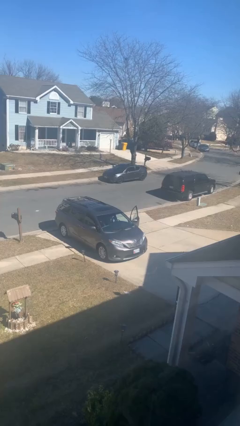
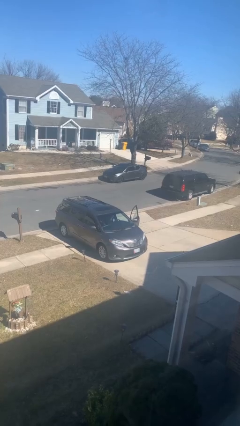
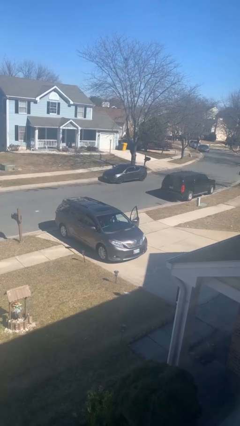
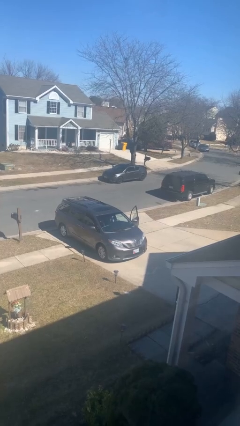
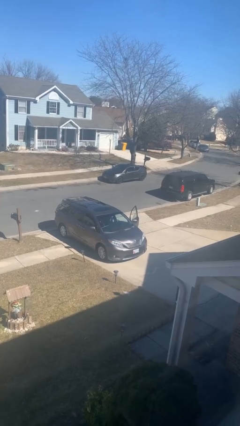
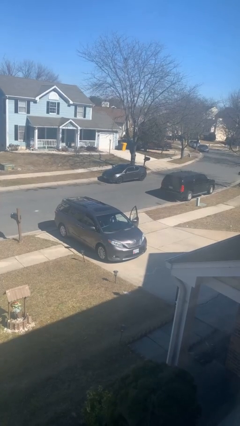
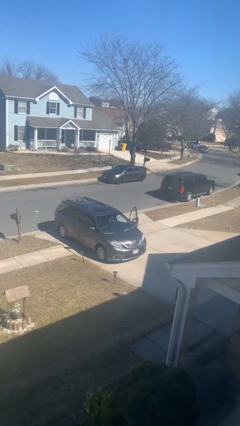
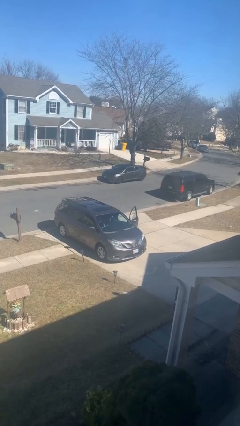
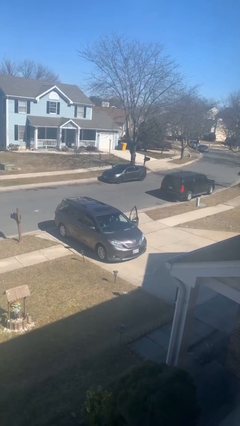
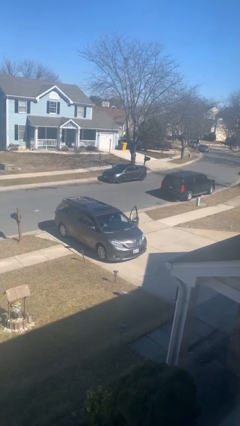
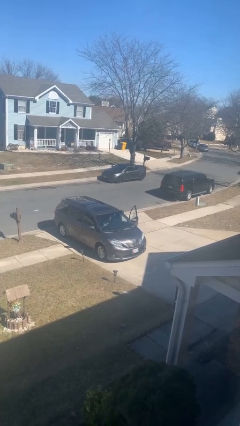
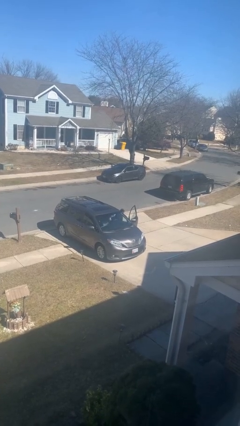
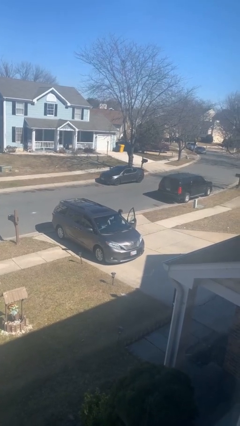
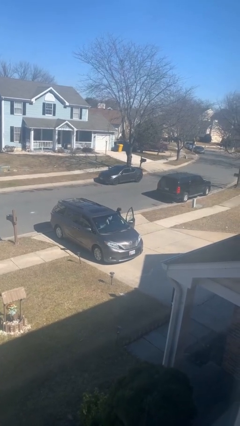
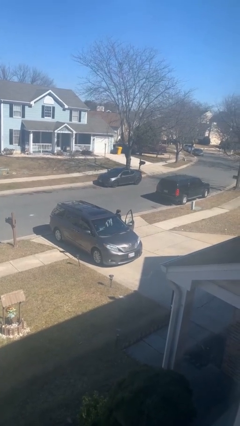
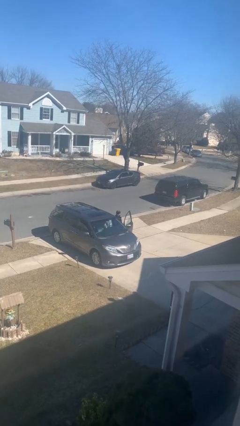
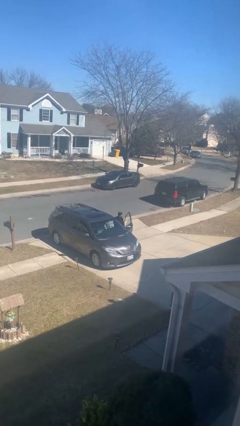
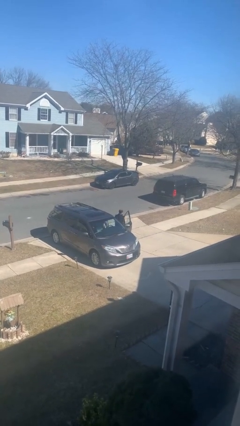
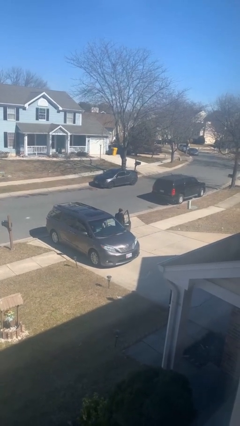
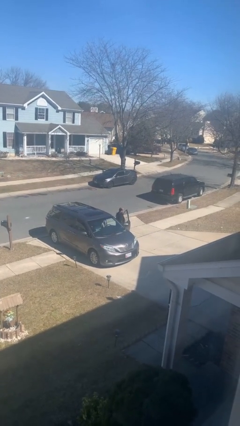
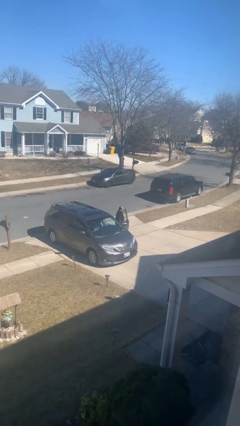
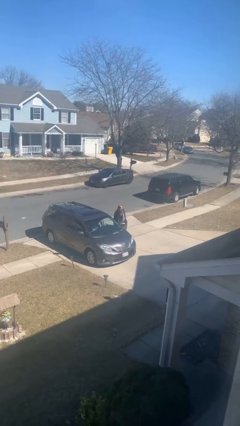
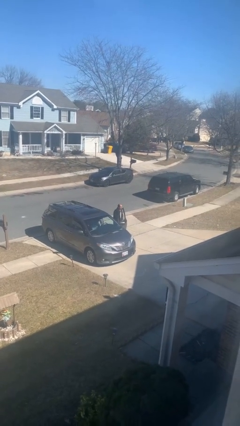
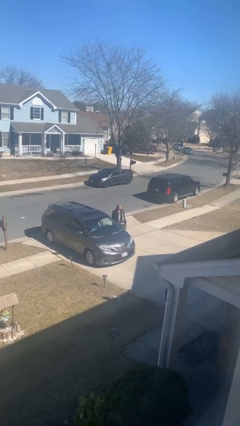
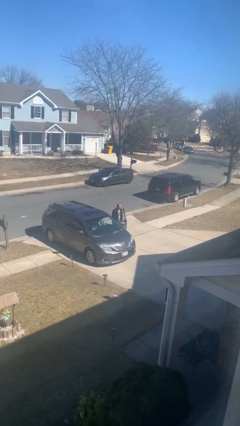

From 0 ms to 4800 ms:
person exits car

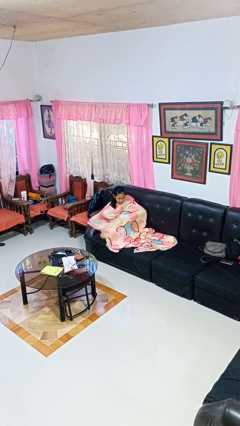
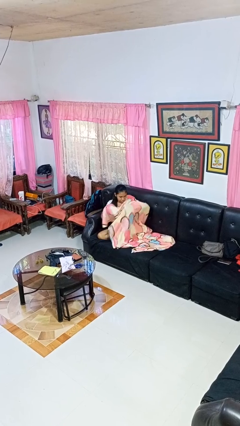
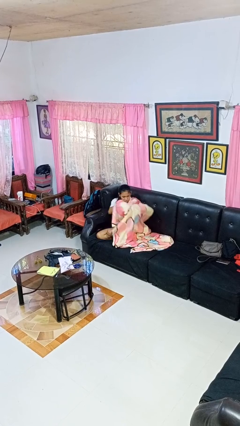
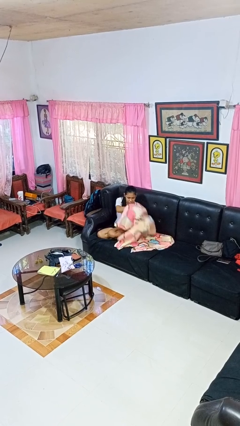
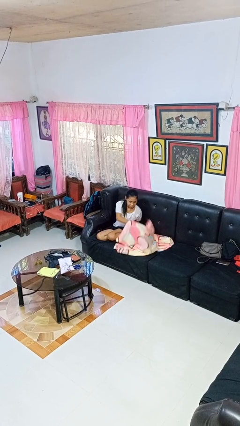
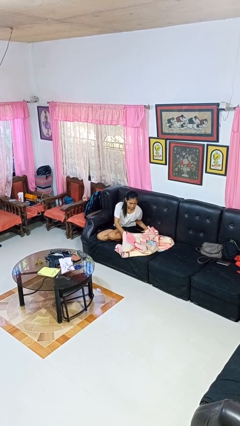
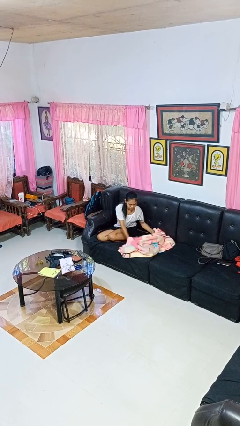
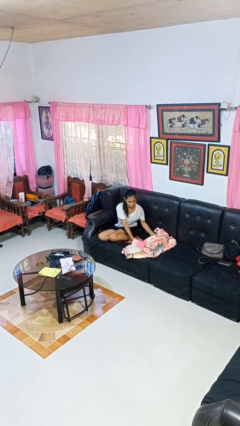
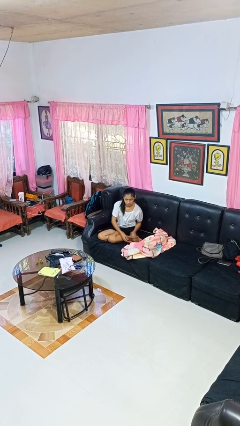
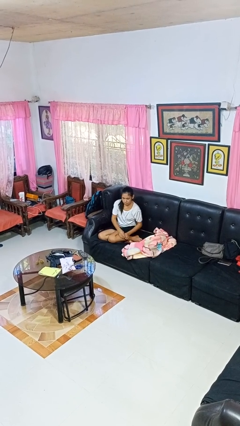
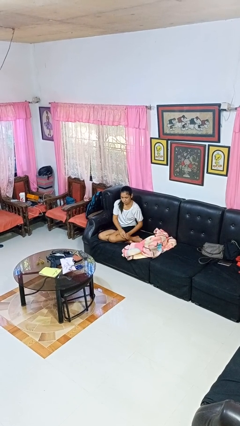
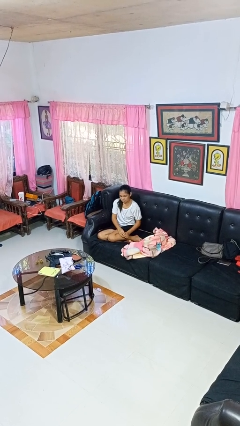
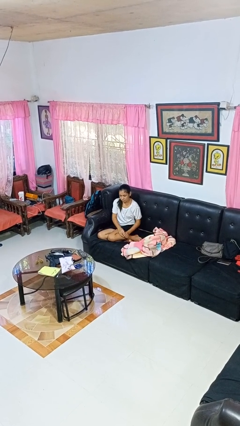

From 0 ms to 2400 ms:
person uncovers with blanket

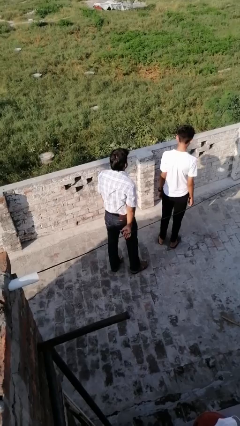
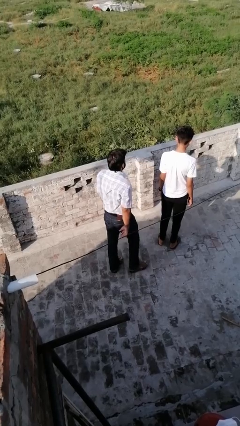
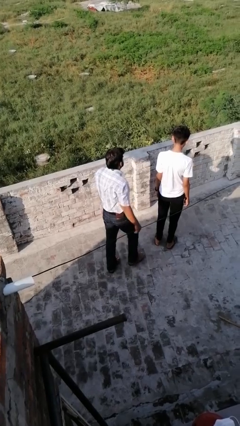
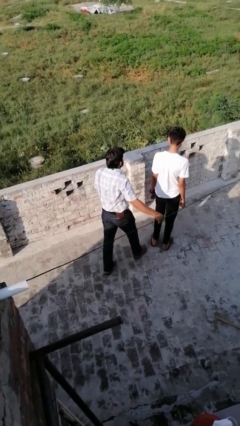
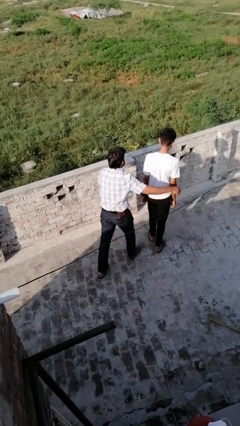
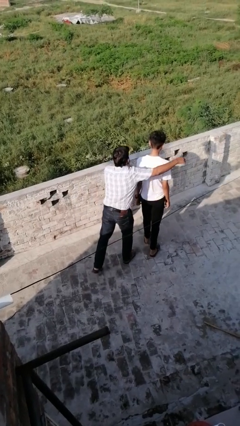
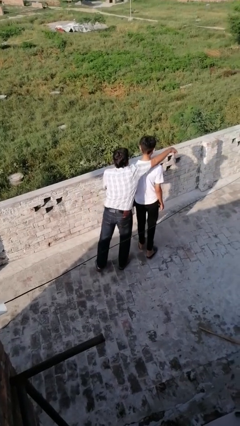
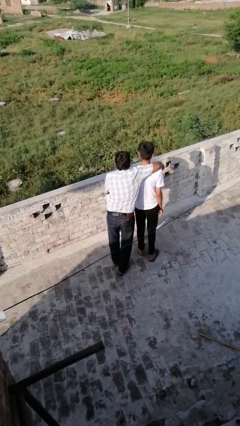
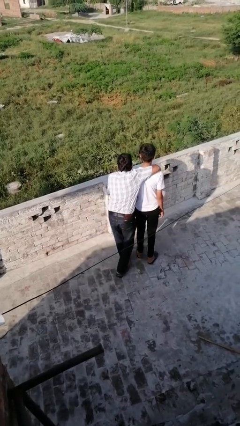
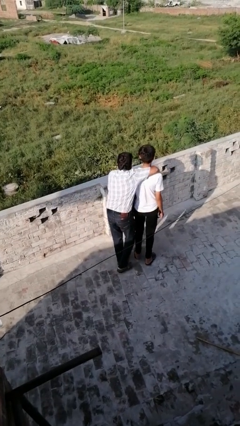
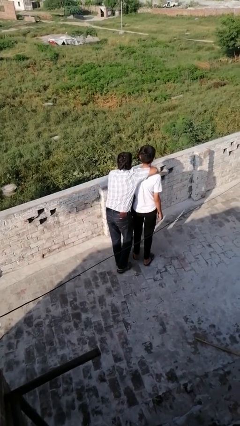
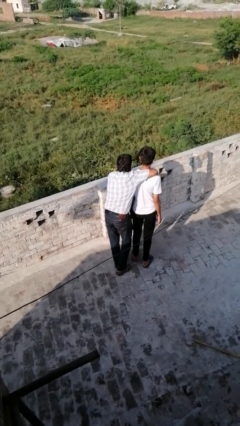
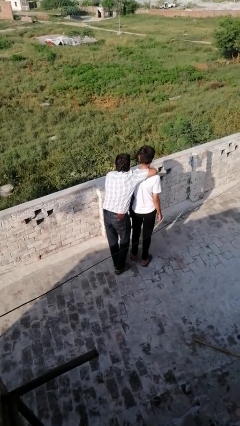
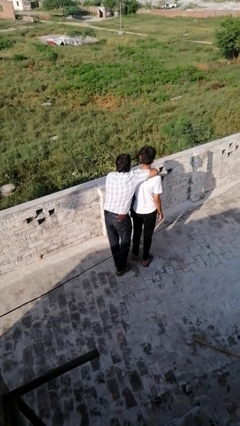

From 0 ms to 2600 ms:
person hugs person from behind

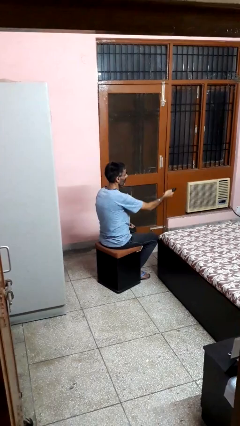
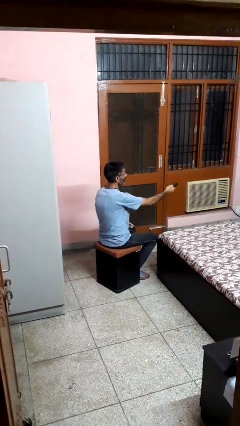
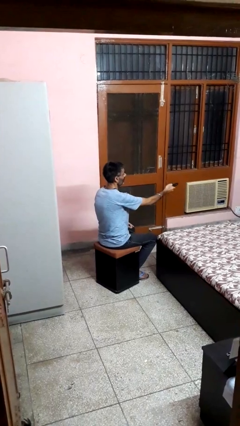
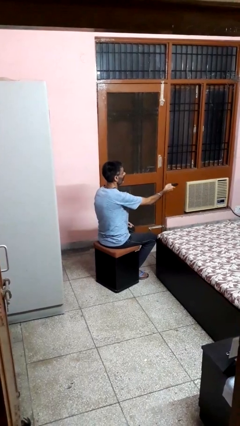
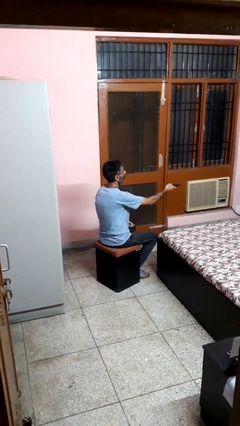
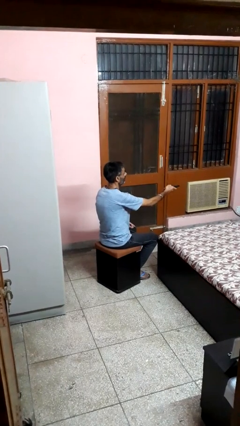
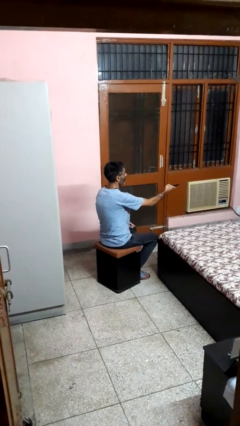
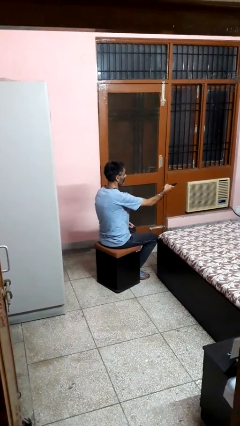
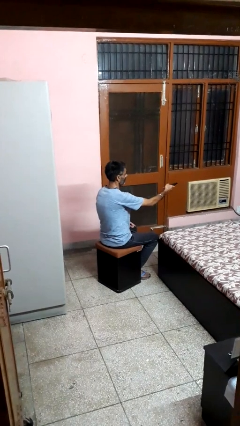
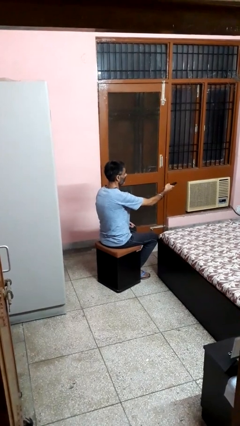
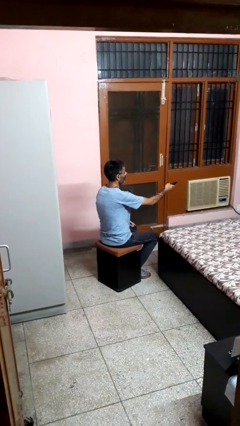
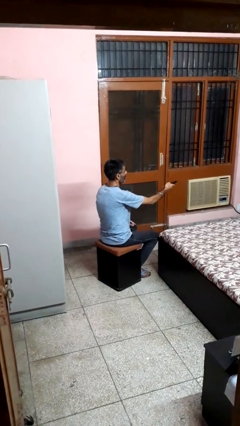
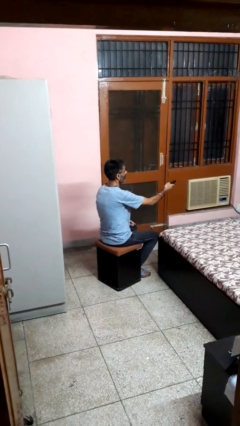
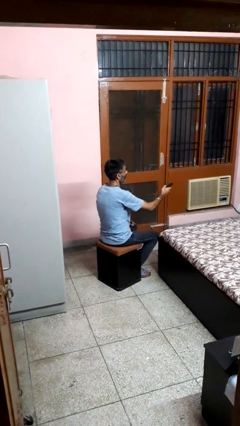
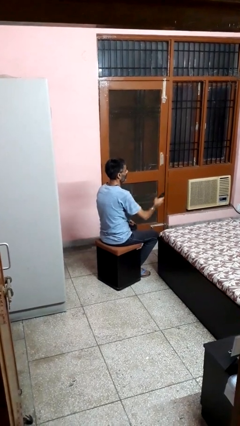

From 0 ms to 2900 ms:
person uses television remote

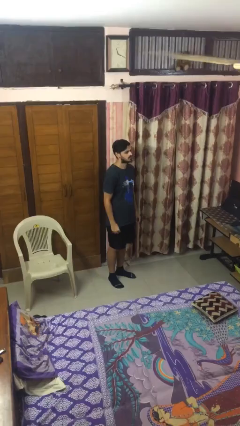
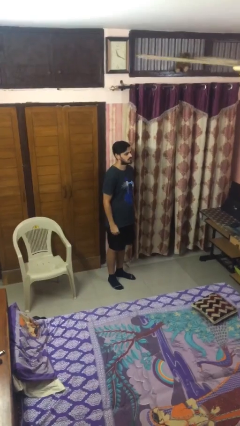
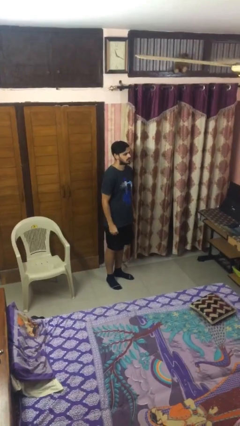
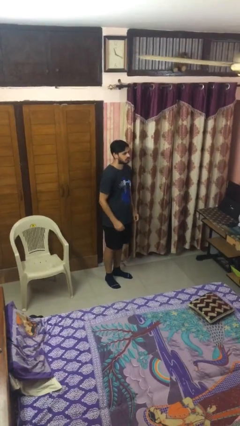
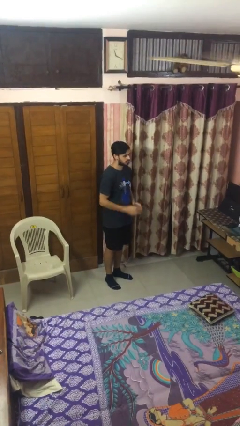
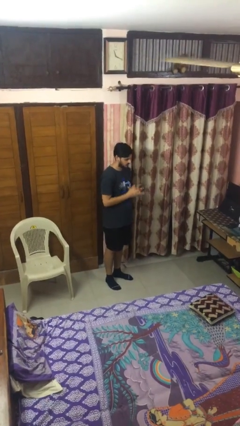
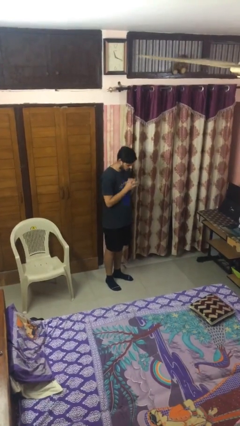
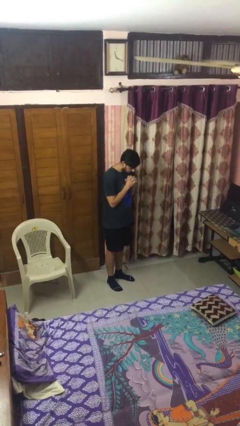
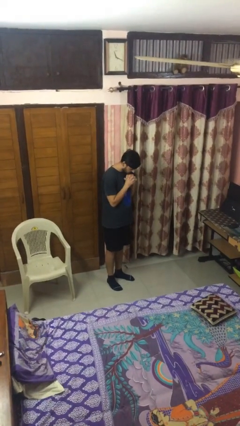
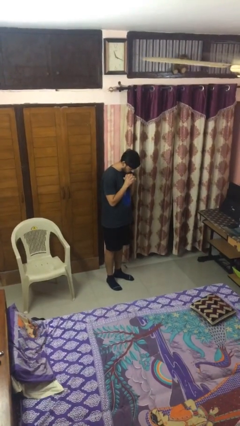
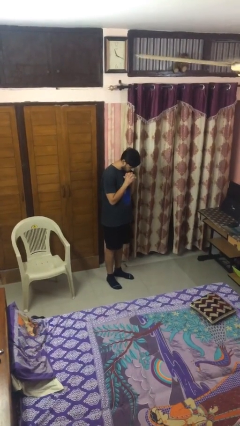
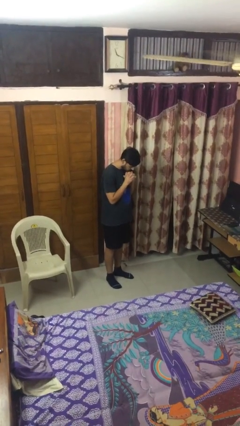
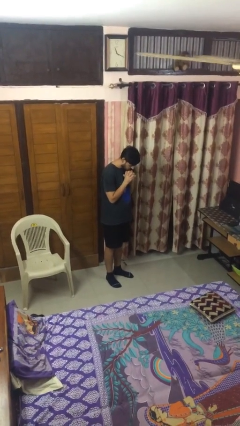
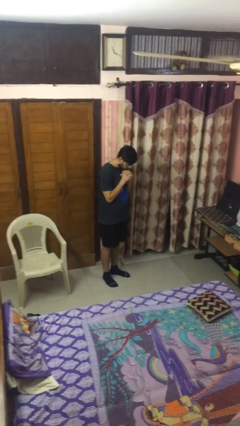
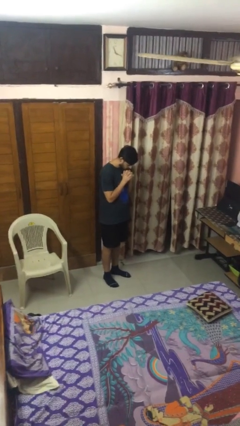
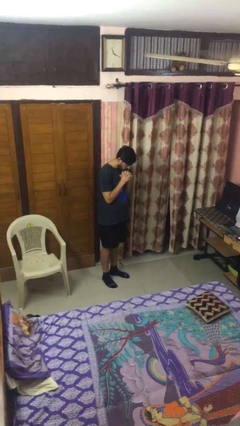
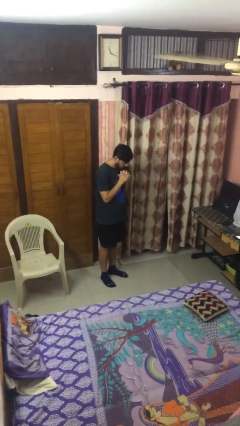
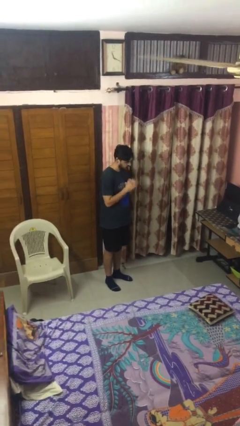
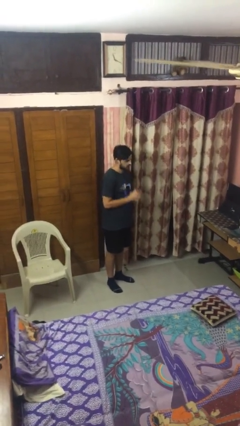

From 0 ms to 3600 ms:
person prays

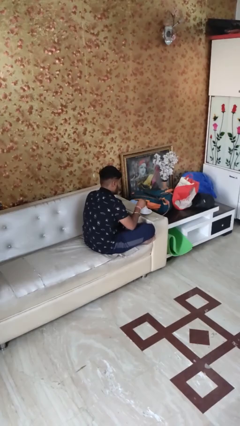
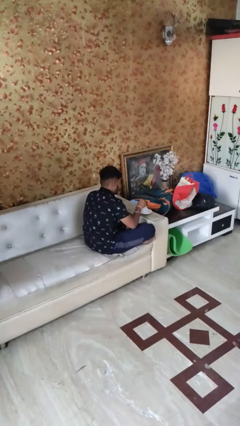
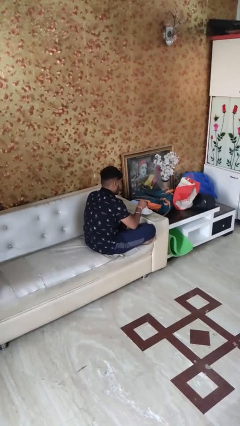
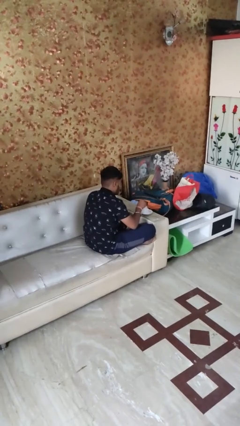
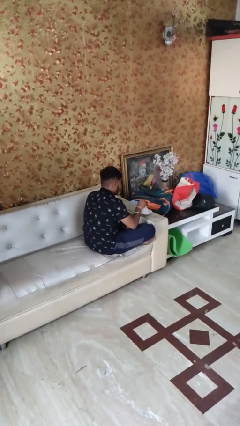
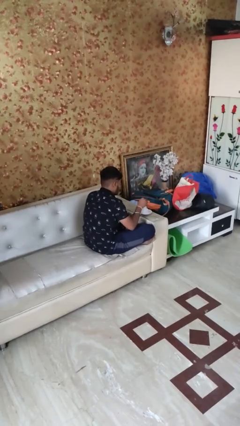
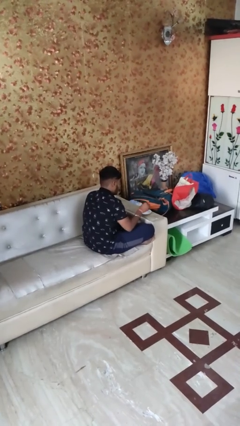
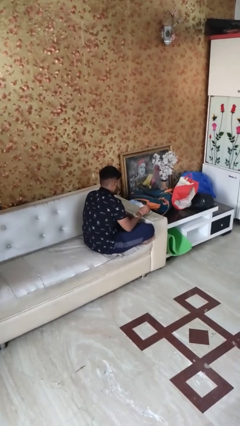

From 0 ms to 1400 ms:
person stirs mug
